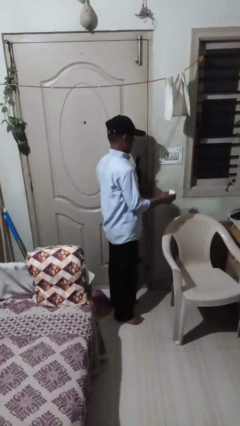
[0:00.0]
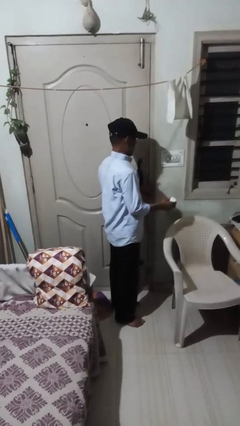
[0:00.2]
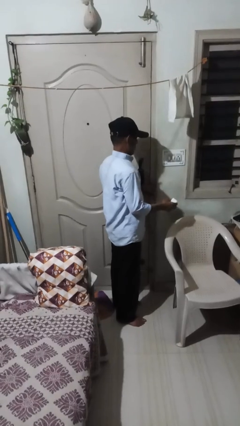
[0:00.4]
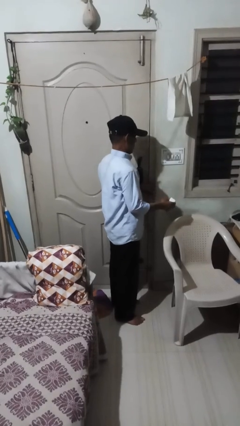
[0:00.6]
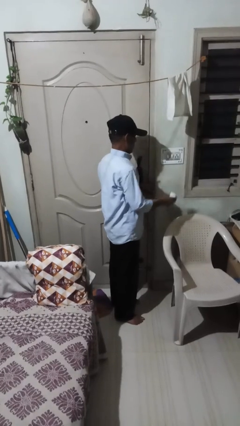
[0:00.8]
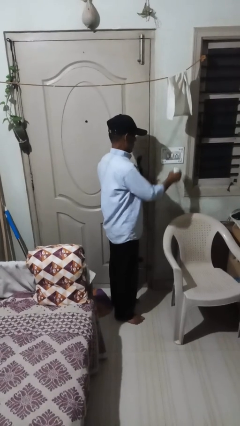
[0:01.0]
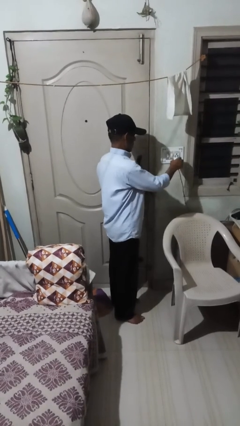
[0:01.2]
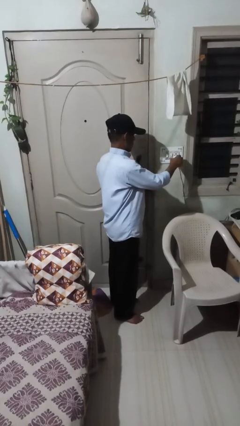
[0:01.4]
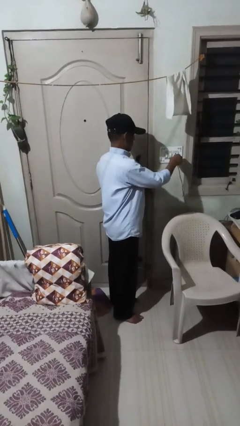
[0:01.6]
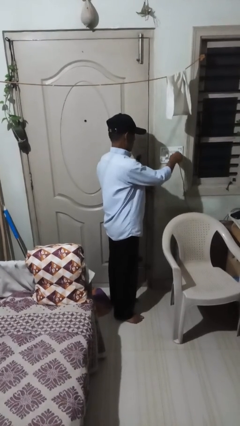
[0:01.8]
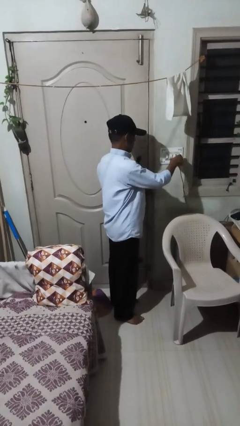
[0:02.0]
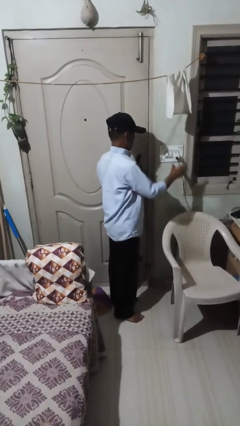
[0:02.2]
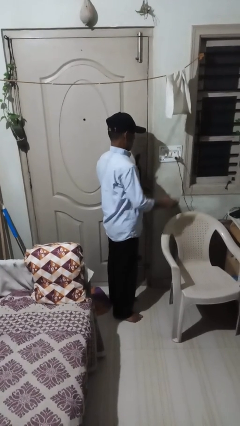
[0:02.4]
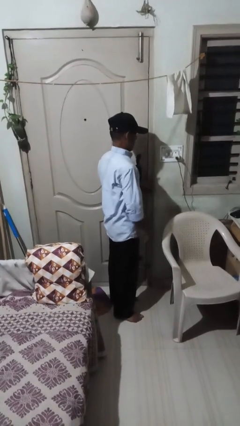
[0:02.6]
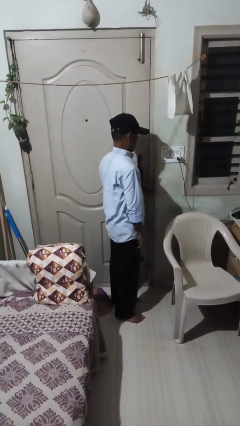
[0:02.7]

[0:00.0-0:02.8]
person plugs into electrical socket

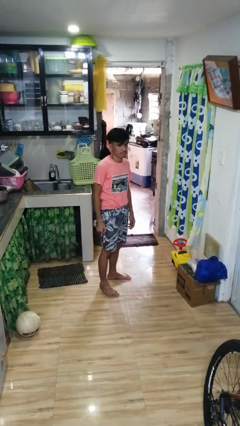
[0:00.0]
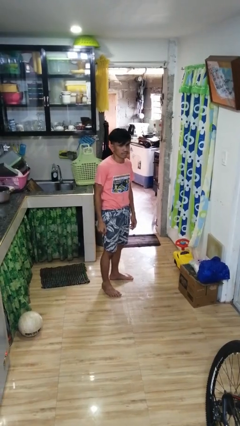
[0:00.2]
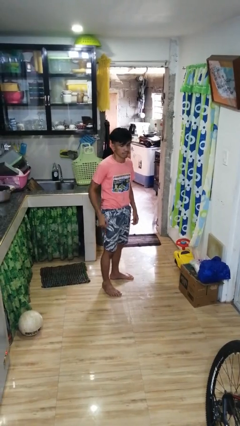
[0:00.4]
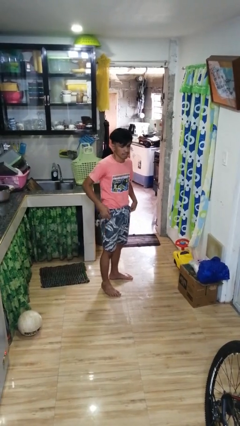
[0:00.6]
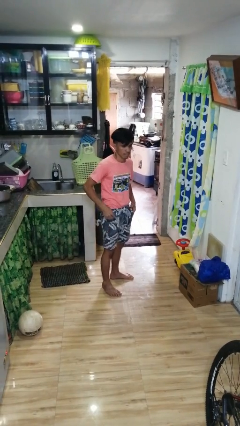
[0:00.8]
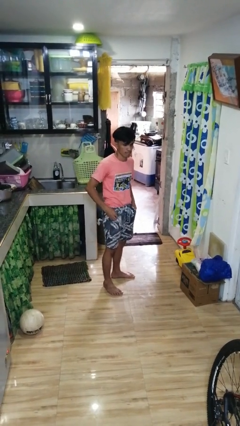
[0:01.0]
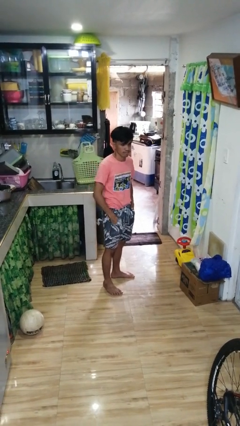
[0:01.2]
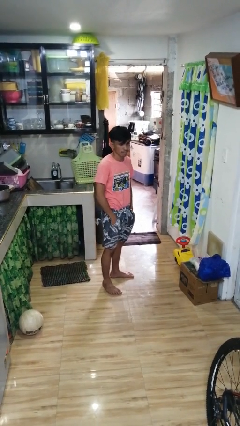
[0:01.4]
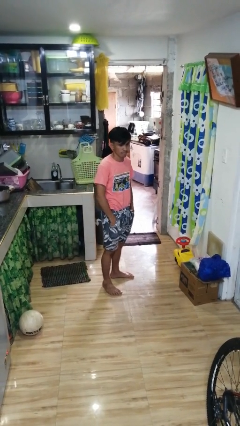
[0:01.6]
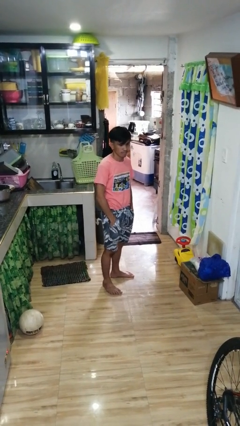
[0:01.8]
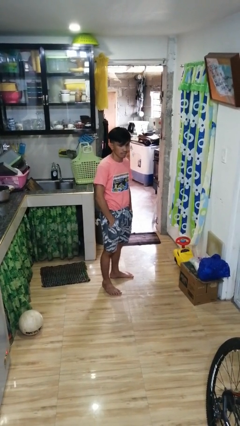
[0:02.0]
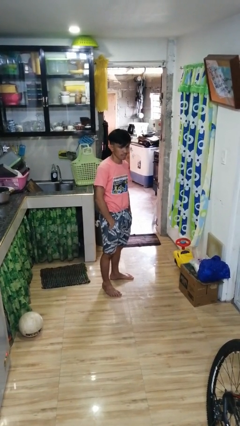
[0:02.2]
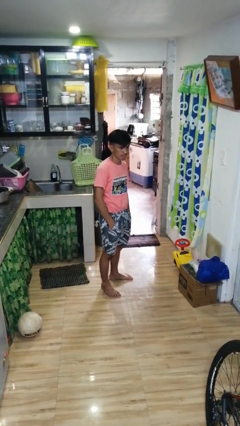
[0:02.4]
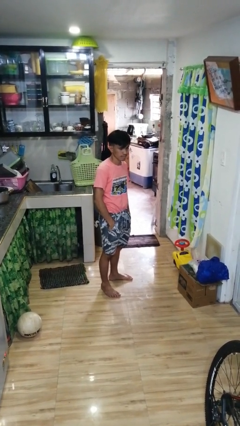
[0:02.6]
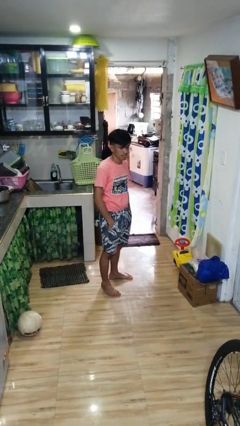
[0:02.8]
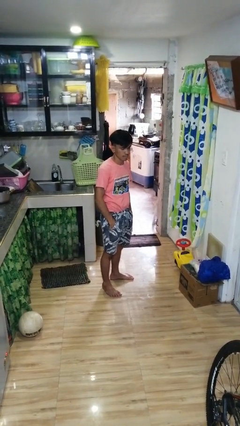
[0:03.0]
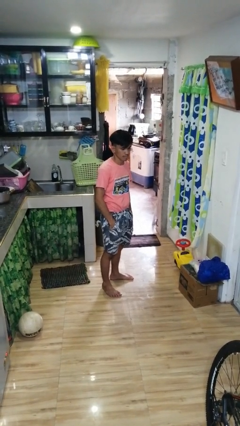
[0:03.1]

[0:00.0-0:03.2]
person puts hands in back pockets

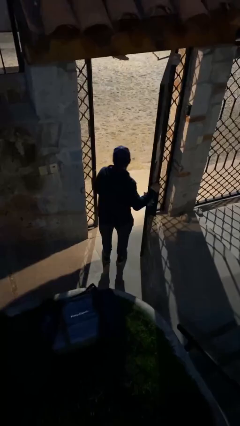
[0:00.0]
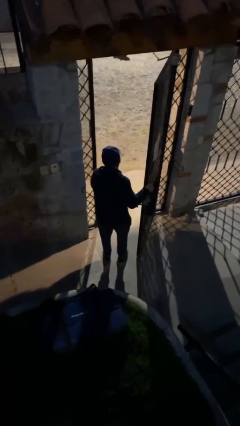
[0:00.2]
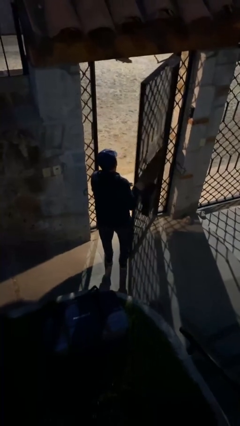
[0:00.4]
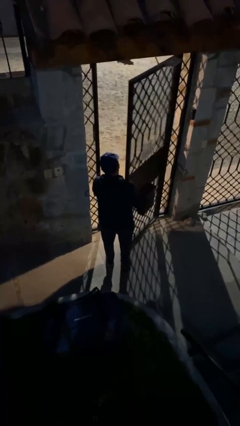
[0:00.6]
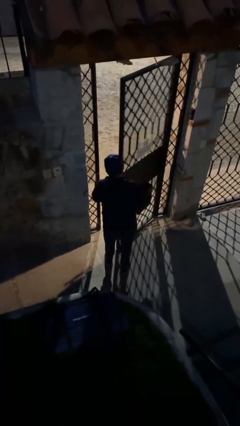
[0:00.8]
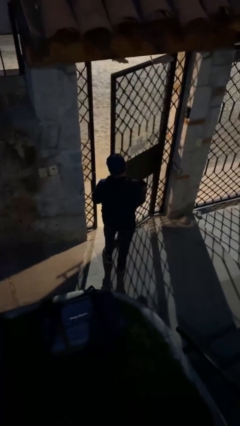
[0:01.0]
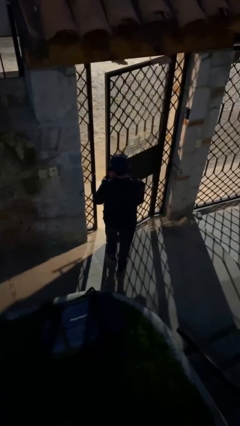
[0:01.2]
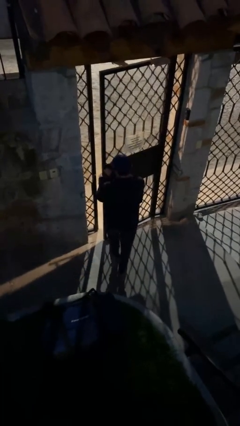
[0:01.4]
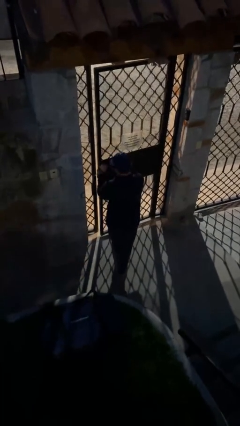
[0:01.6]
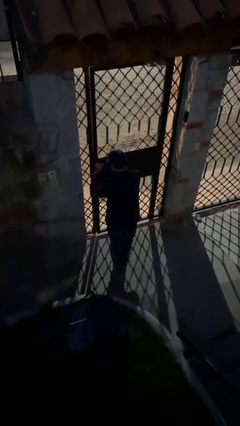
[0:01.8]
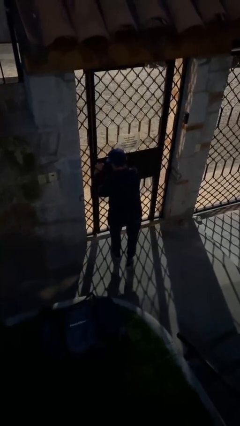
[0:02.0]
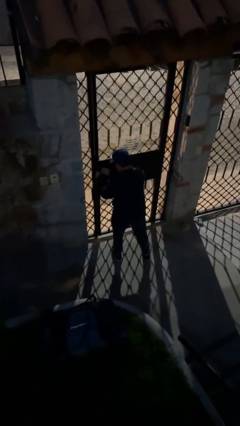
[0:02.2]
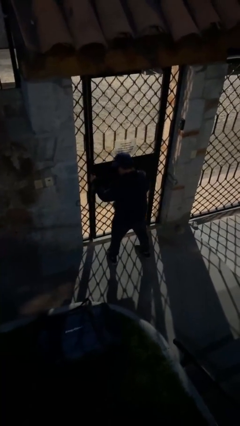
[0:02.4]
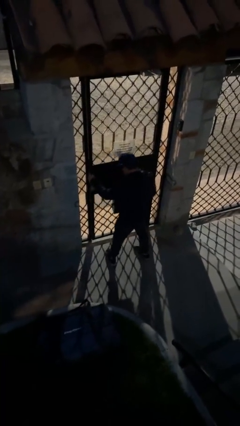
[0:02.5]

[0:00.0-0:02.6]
person closes facility door

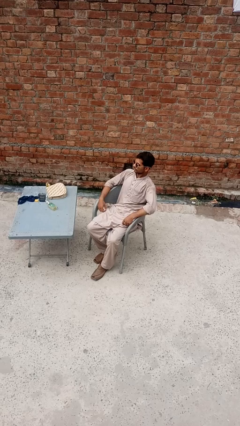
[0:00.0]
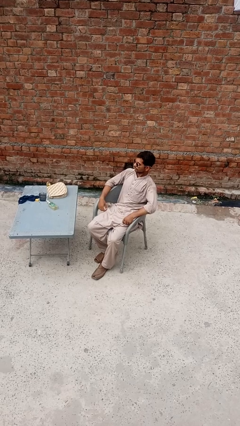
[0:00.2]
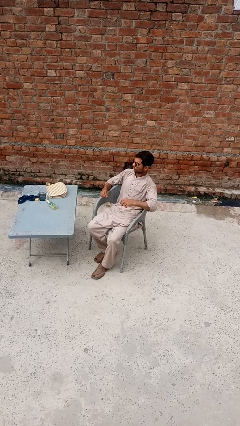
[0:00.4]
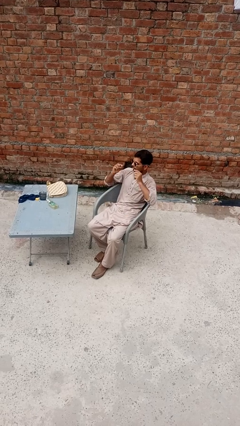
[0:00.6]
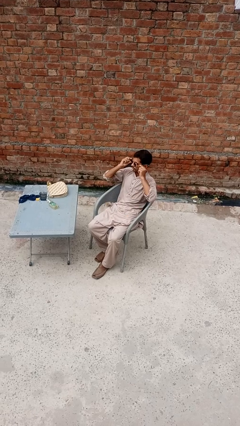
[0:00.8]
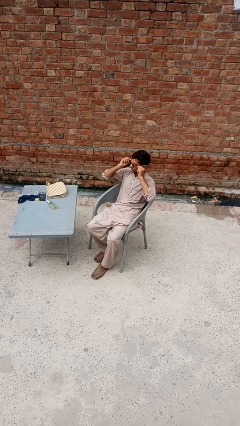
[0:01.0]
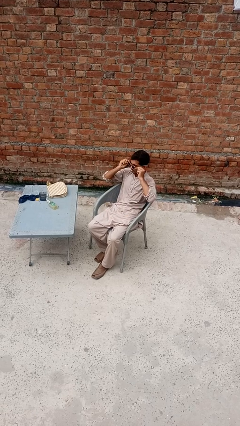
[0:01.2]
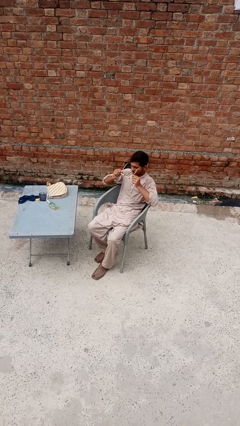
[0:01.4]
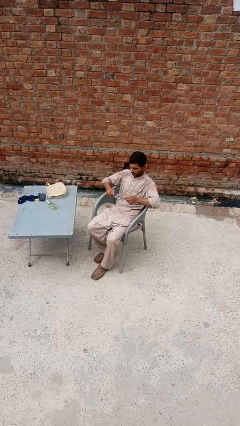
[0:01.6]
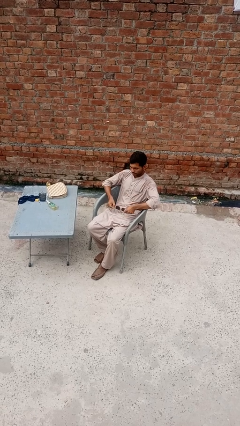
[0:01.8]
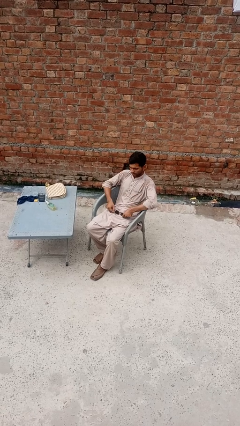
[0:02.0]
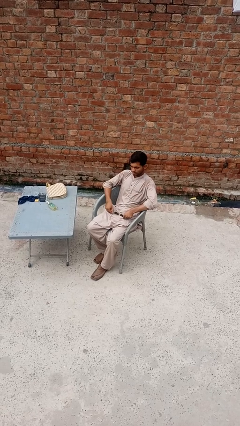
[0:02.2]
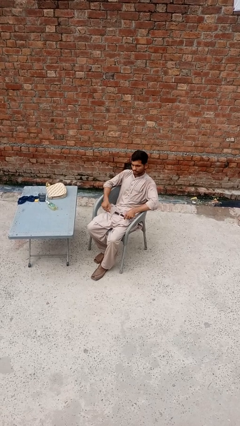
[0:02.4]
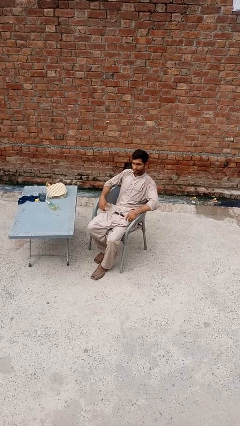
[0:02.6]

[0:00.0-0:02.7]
person takes off sunglasses

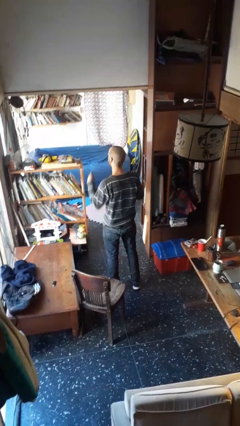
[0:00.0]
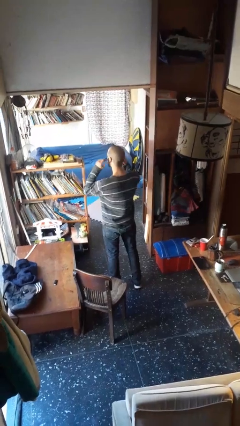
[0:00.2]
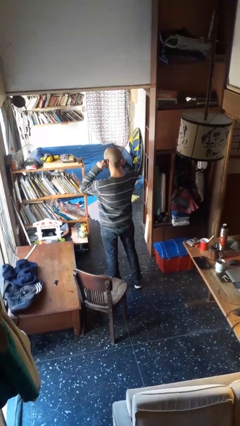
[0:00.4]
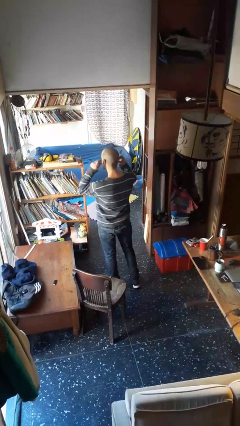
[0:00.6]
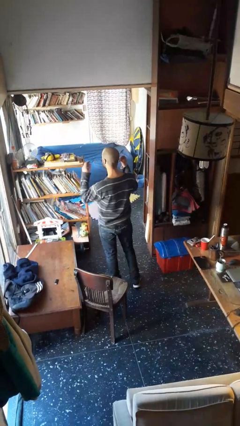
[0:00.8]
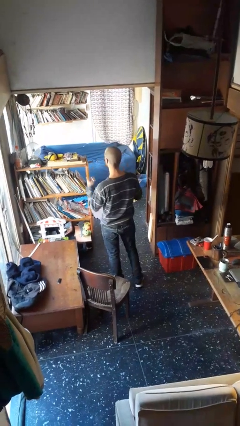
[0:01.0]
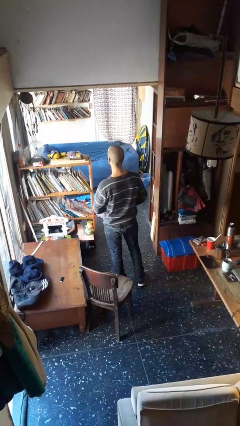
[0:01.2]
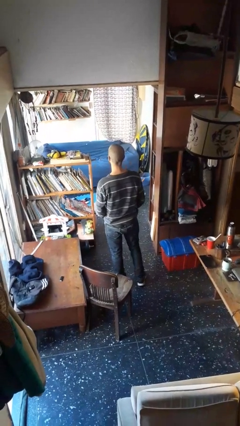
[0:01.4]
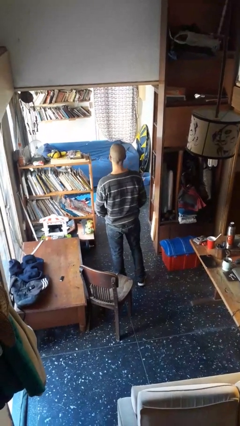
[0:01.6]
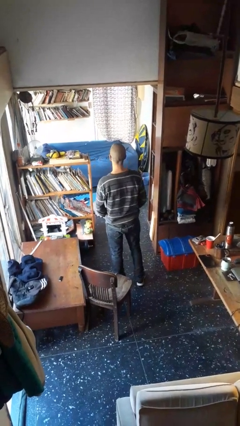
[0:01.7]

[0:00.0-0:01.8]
person takes off headphones

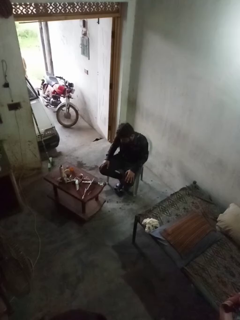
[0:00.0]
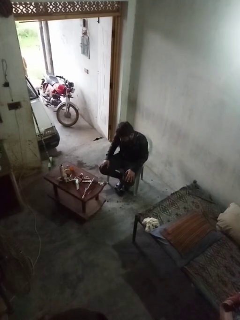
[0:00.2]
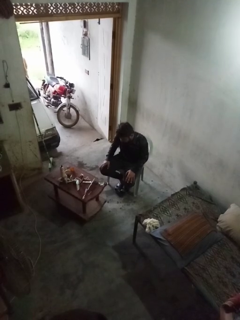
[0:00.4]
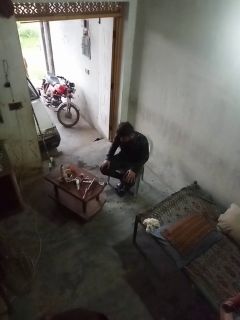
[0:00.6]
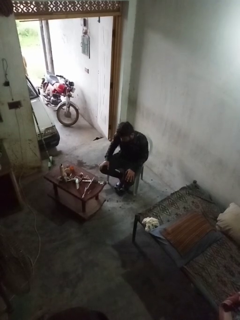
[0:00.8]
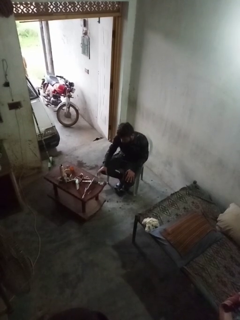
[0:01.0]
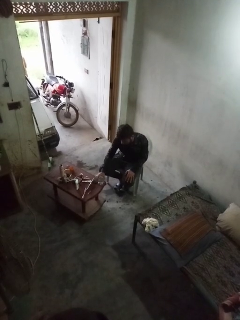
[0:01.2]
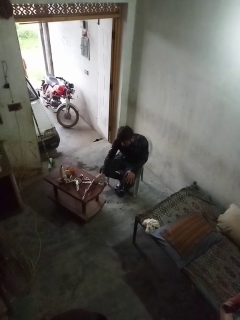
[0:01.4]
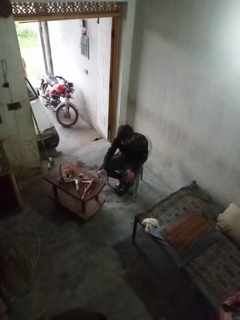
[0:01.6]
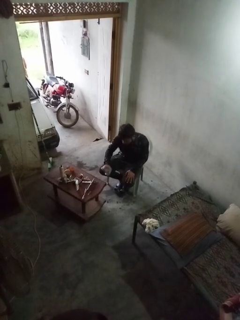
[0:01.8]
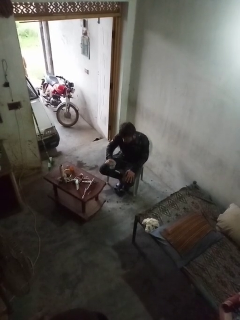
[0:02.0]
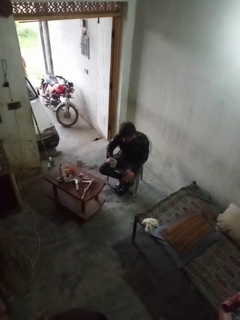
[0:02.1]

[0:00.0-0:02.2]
person picks up object from table

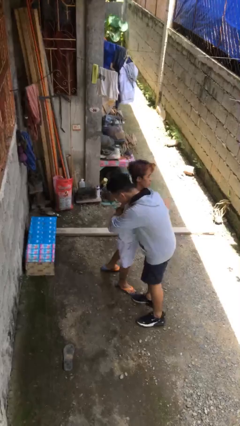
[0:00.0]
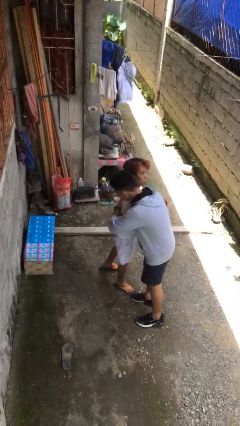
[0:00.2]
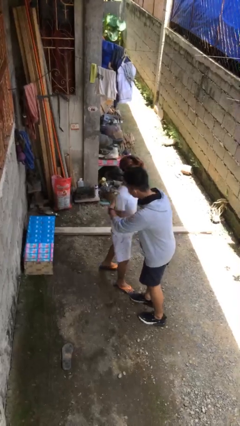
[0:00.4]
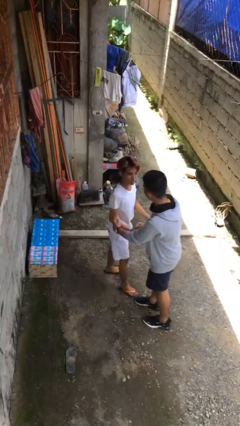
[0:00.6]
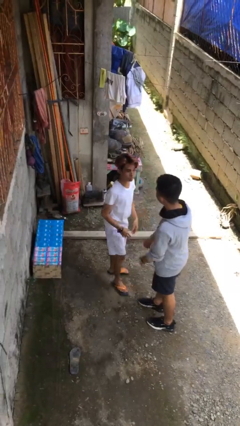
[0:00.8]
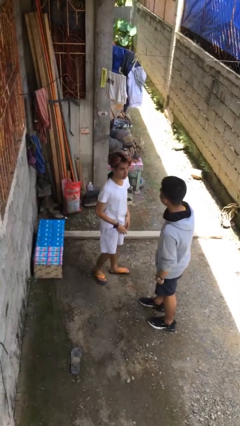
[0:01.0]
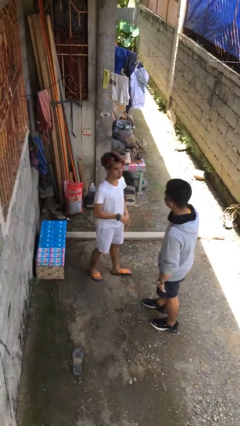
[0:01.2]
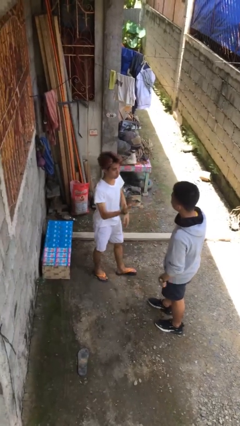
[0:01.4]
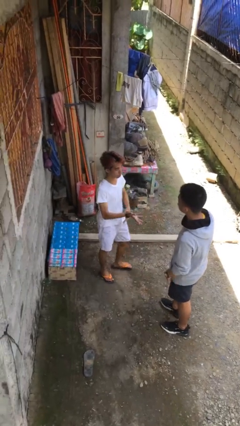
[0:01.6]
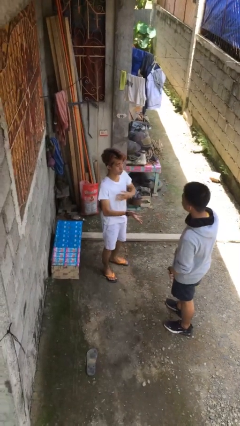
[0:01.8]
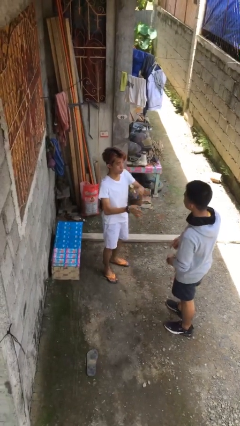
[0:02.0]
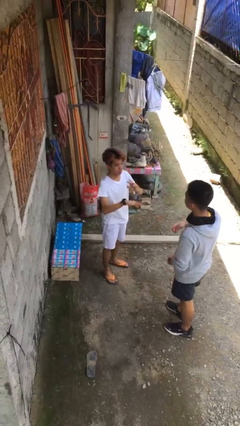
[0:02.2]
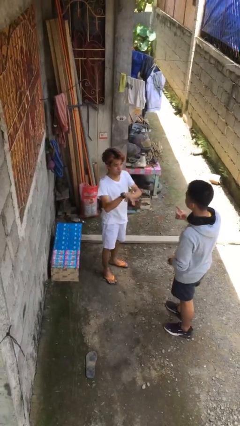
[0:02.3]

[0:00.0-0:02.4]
person embraces person
